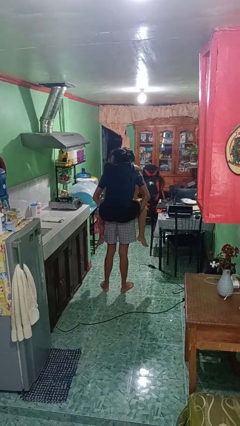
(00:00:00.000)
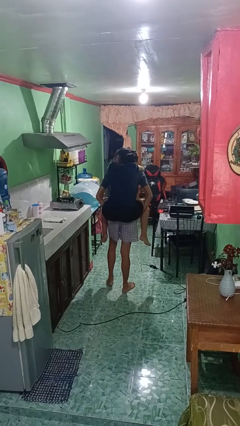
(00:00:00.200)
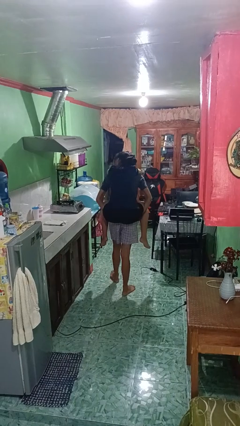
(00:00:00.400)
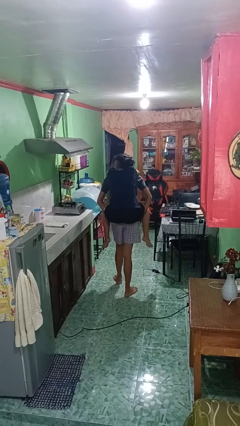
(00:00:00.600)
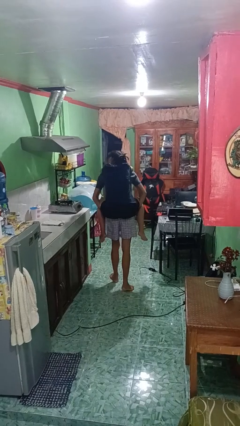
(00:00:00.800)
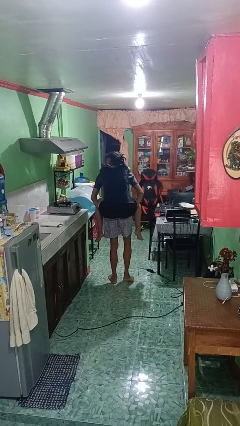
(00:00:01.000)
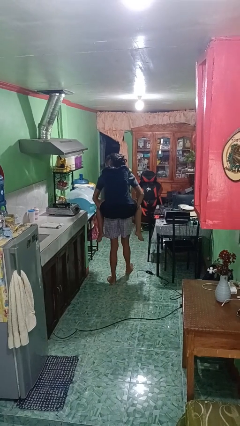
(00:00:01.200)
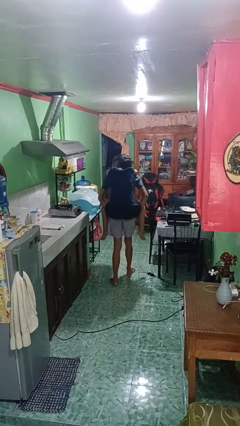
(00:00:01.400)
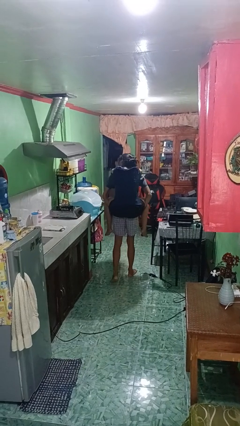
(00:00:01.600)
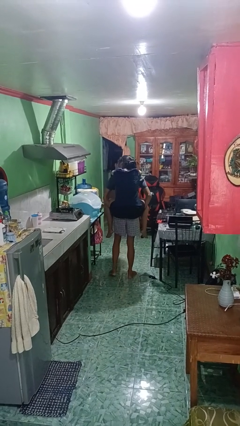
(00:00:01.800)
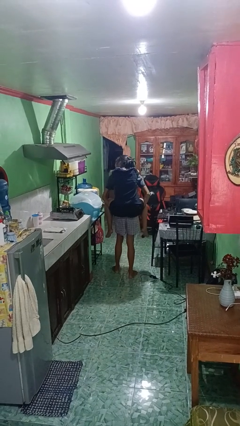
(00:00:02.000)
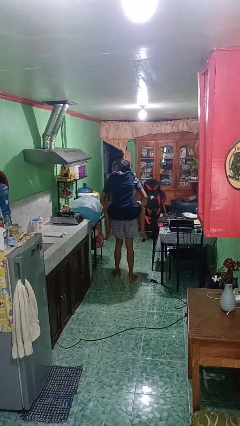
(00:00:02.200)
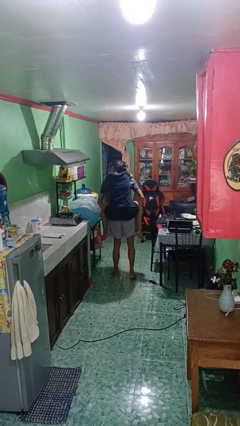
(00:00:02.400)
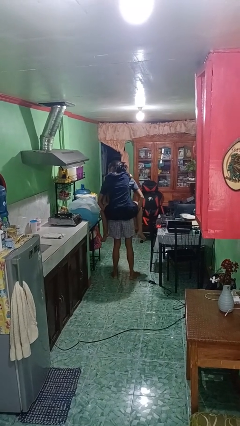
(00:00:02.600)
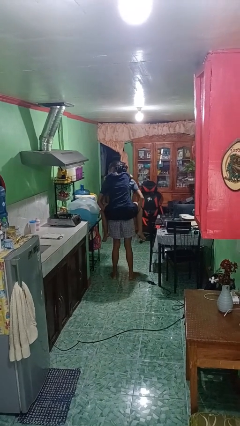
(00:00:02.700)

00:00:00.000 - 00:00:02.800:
person carries person on back

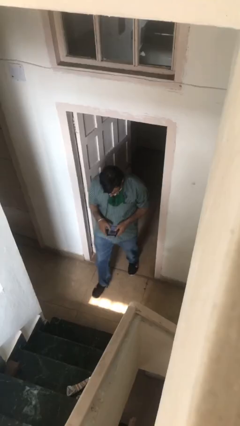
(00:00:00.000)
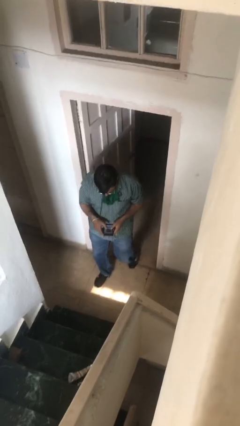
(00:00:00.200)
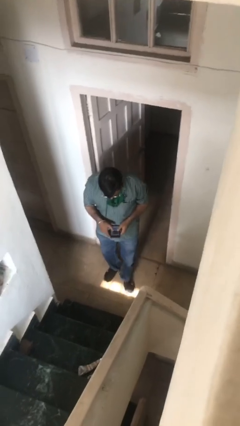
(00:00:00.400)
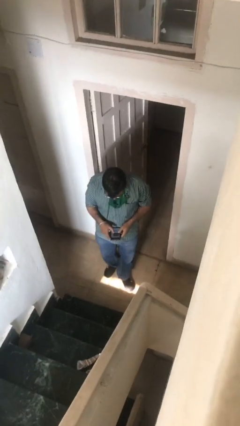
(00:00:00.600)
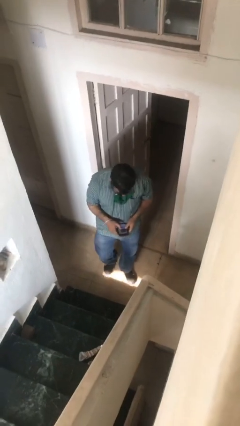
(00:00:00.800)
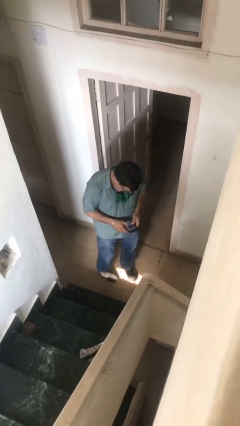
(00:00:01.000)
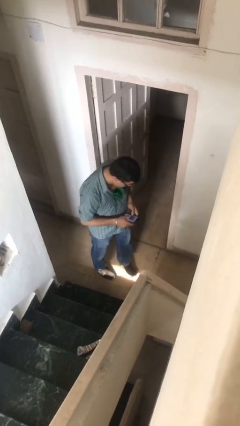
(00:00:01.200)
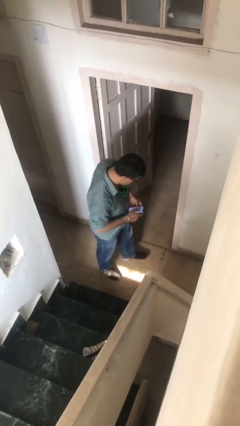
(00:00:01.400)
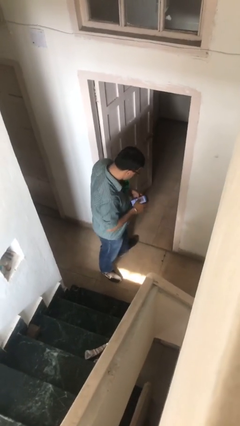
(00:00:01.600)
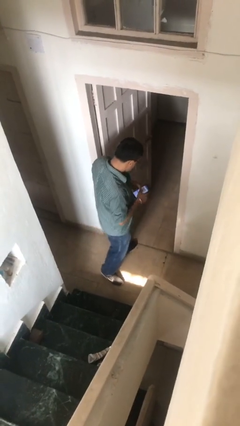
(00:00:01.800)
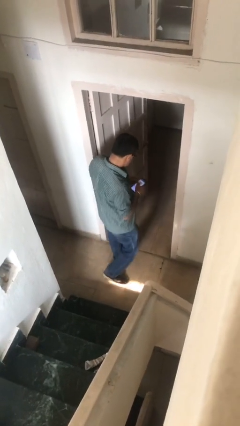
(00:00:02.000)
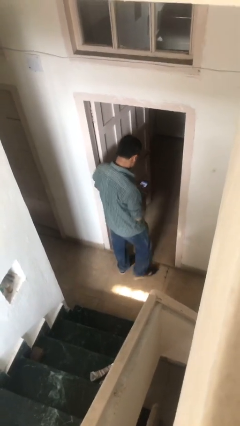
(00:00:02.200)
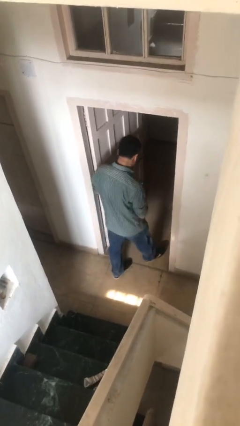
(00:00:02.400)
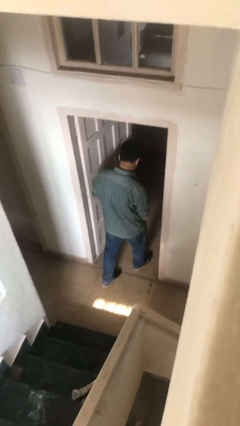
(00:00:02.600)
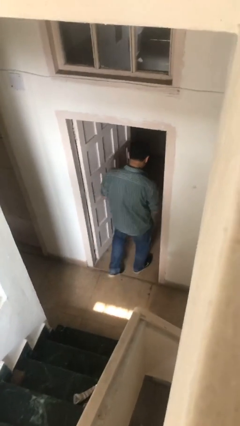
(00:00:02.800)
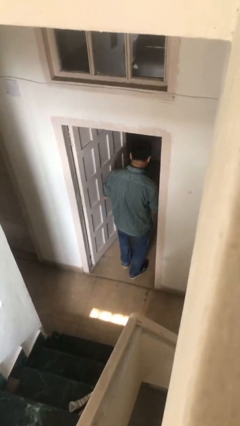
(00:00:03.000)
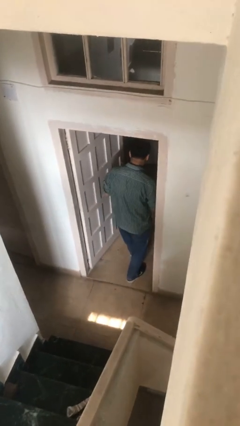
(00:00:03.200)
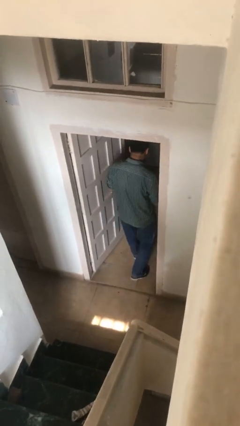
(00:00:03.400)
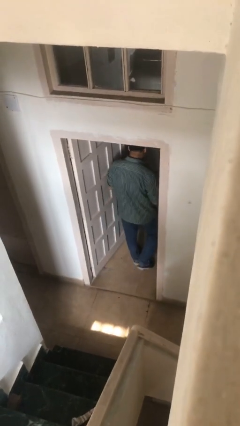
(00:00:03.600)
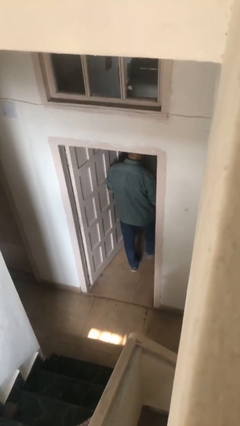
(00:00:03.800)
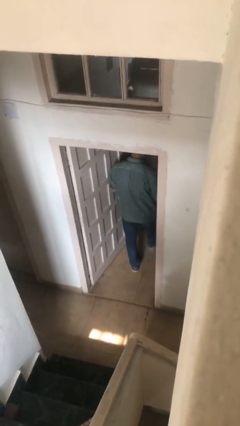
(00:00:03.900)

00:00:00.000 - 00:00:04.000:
person exits scene through structure

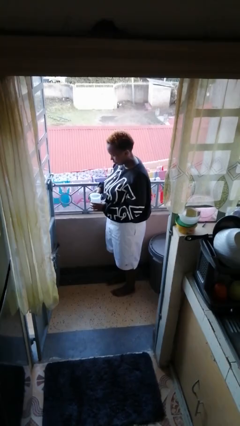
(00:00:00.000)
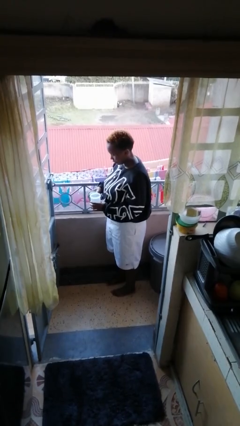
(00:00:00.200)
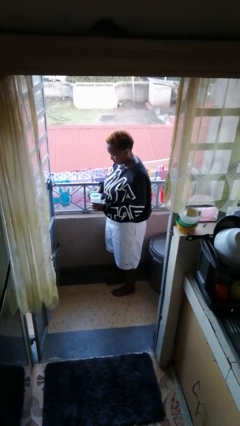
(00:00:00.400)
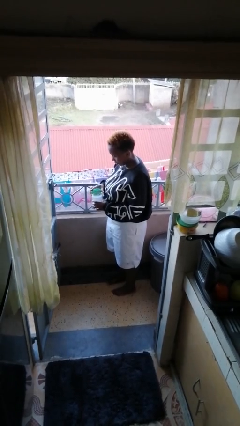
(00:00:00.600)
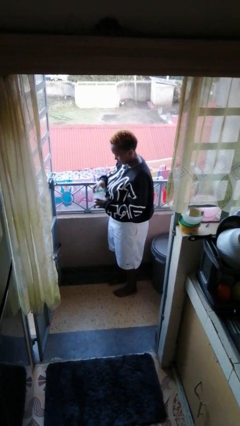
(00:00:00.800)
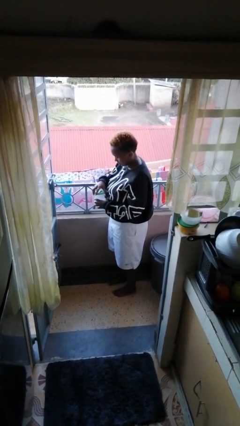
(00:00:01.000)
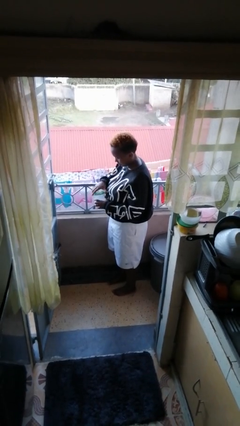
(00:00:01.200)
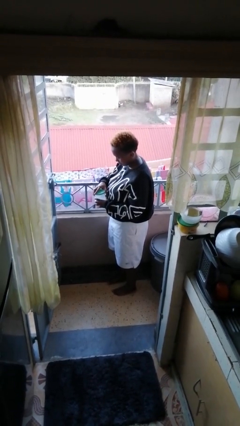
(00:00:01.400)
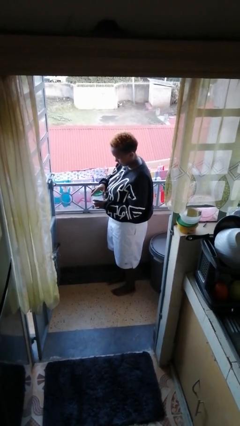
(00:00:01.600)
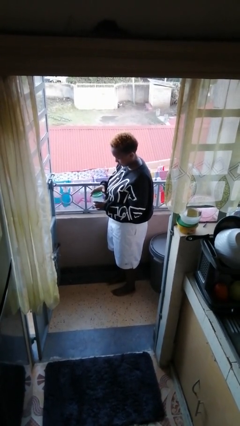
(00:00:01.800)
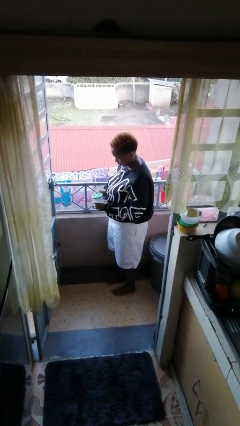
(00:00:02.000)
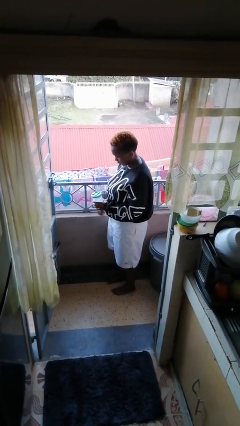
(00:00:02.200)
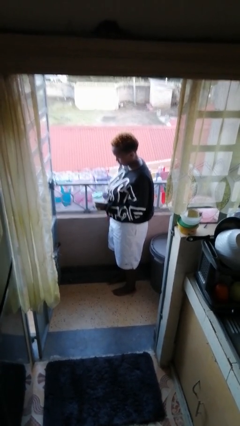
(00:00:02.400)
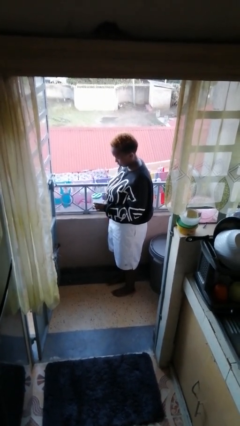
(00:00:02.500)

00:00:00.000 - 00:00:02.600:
person closes jar

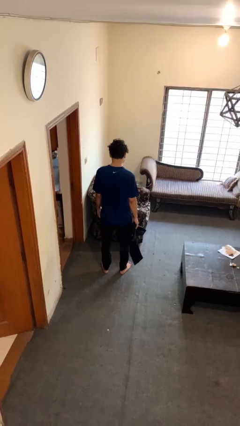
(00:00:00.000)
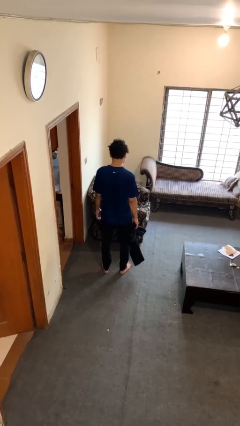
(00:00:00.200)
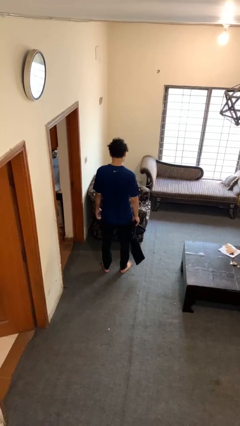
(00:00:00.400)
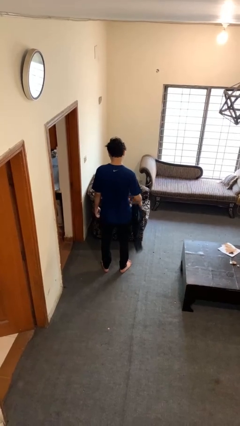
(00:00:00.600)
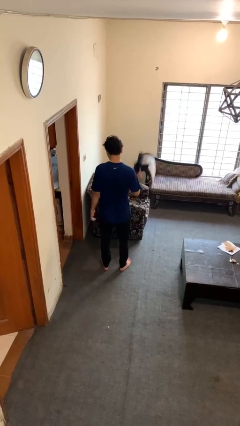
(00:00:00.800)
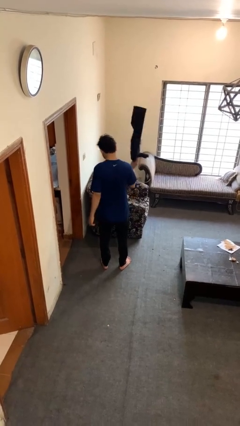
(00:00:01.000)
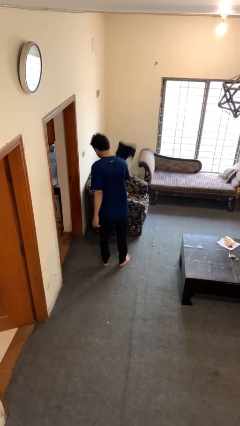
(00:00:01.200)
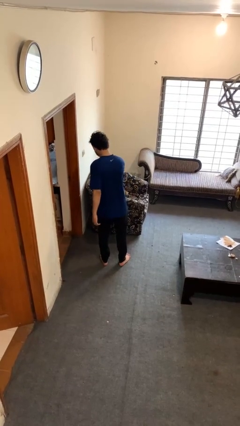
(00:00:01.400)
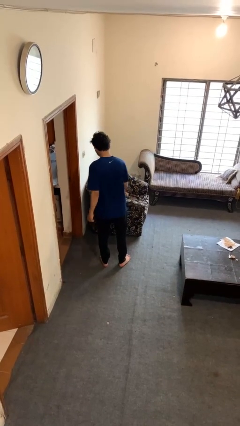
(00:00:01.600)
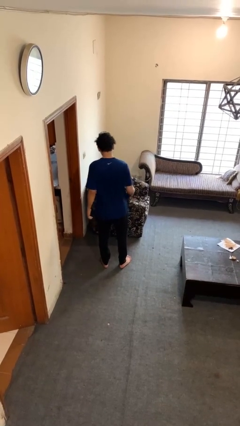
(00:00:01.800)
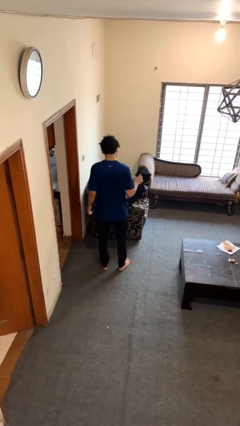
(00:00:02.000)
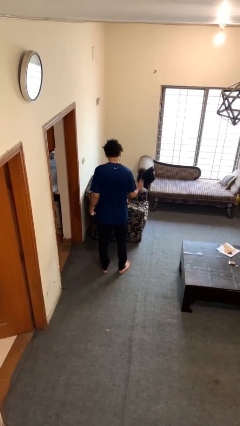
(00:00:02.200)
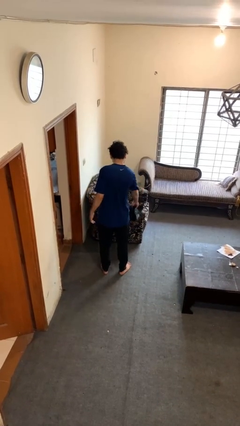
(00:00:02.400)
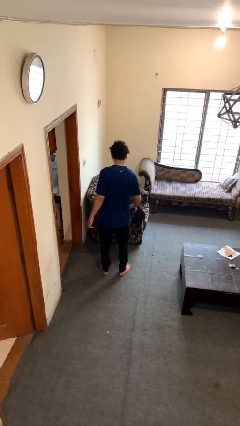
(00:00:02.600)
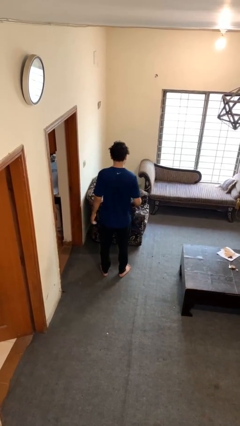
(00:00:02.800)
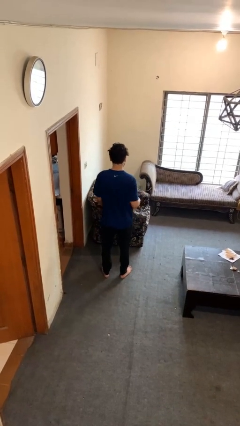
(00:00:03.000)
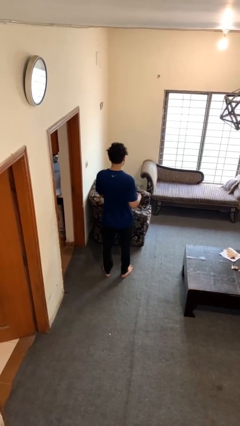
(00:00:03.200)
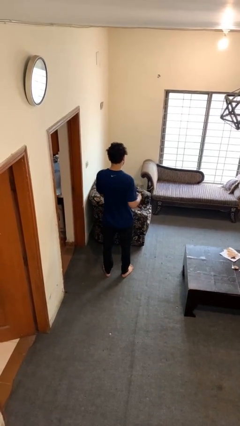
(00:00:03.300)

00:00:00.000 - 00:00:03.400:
person dusts furniture

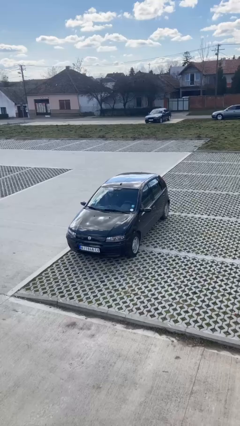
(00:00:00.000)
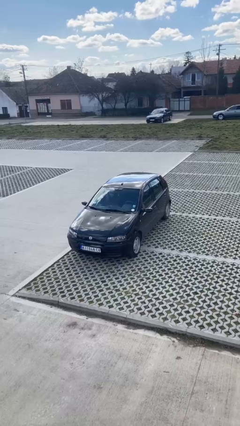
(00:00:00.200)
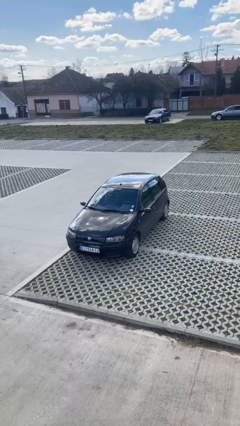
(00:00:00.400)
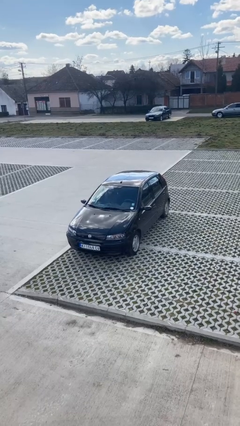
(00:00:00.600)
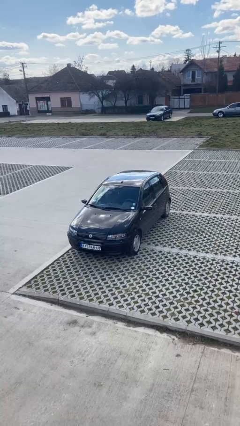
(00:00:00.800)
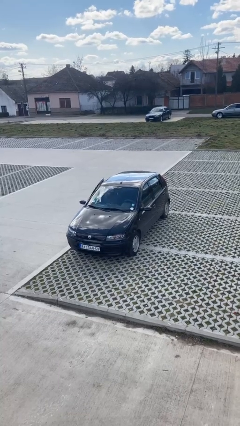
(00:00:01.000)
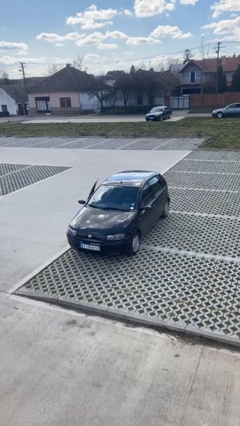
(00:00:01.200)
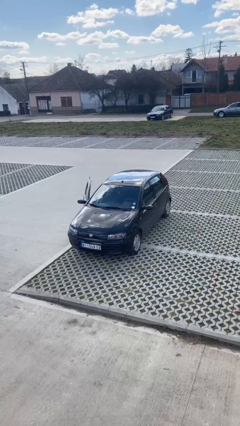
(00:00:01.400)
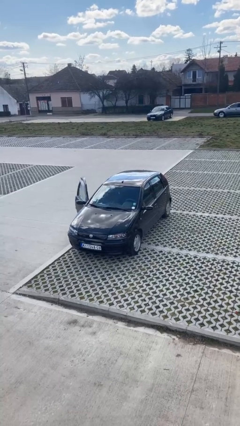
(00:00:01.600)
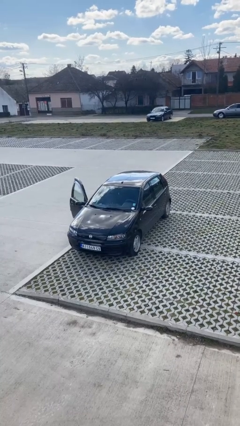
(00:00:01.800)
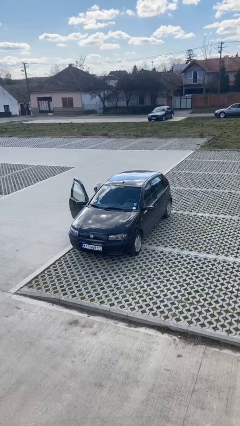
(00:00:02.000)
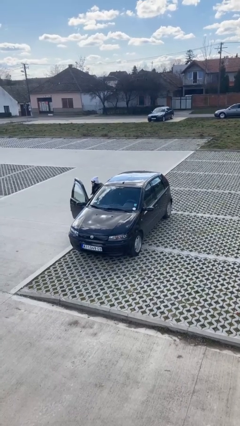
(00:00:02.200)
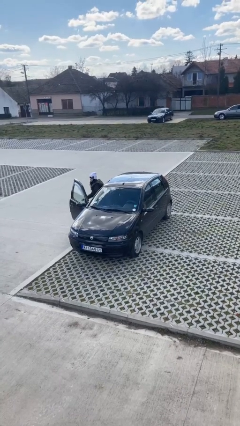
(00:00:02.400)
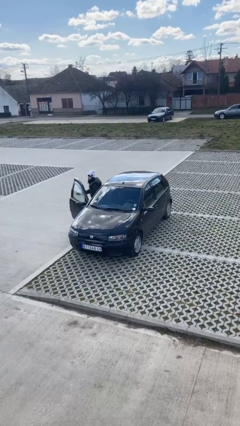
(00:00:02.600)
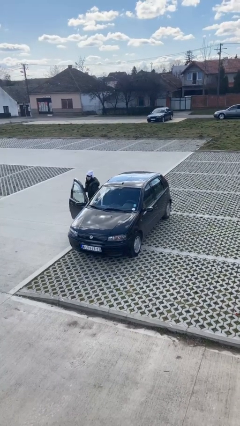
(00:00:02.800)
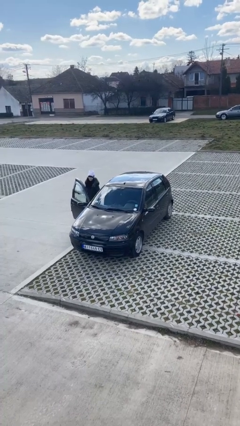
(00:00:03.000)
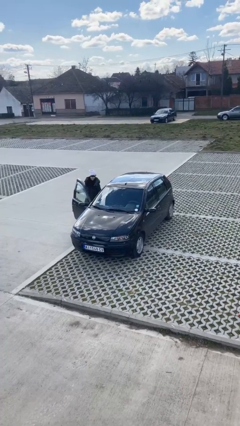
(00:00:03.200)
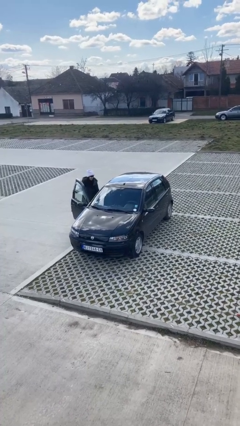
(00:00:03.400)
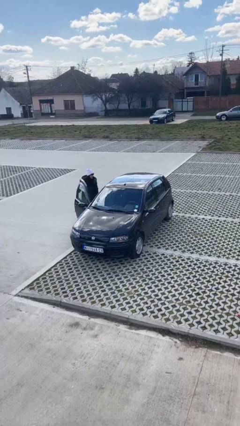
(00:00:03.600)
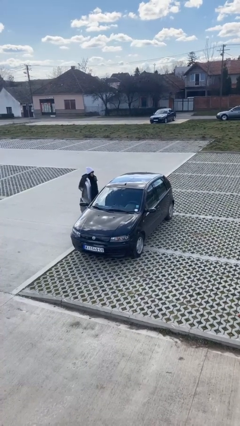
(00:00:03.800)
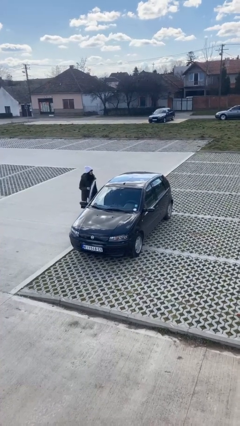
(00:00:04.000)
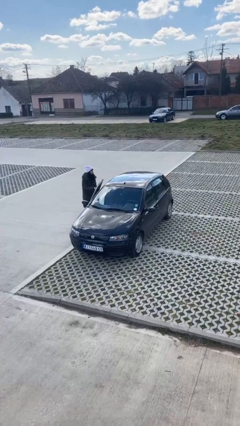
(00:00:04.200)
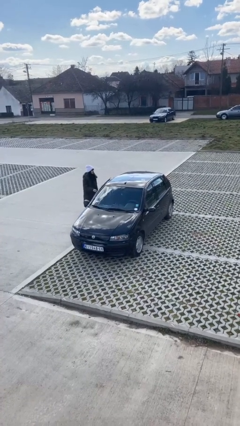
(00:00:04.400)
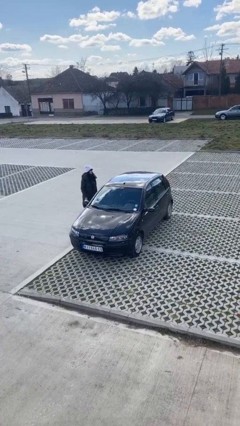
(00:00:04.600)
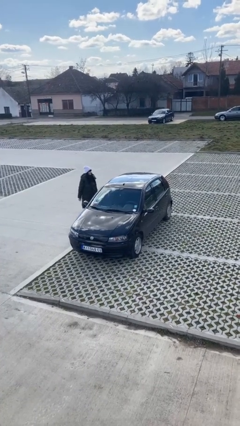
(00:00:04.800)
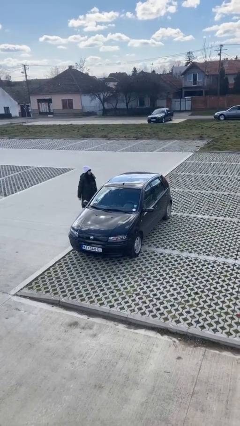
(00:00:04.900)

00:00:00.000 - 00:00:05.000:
car drops off person
